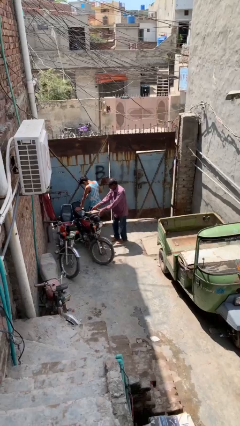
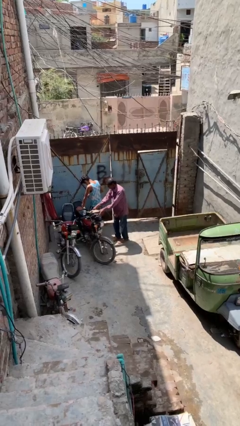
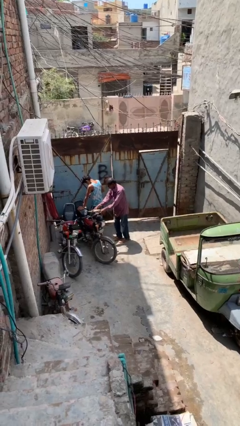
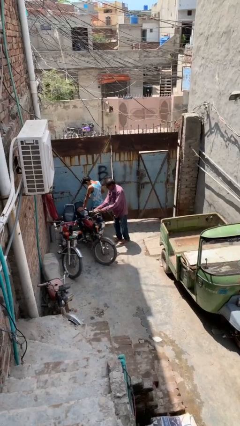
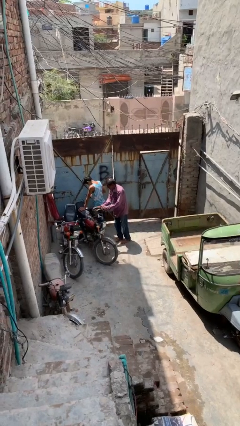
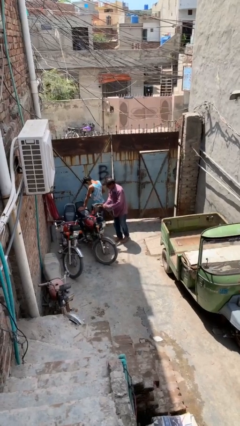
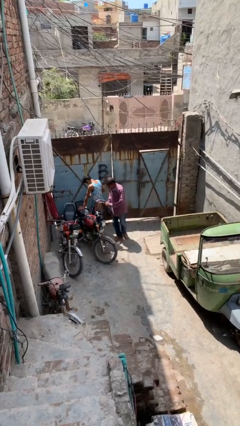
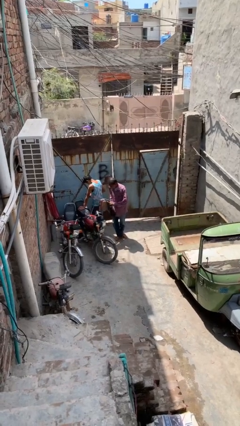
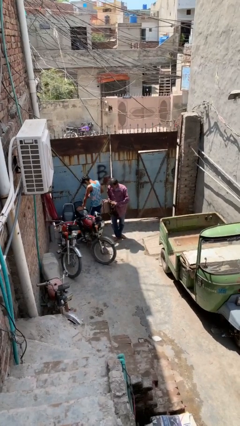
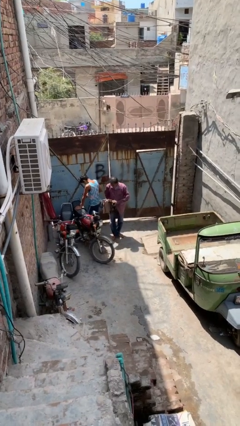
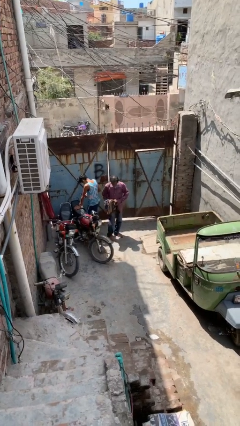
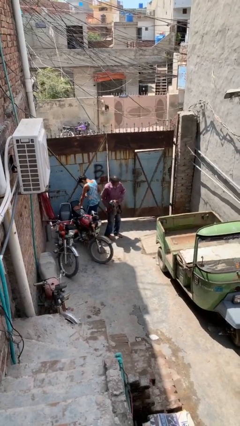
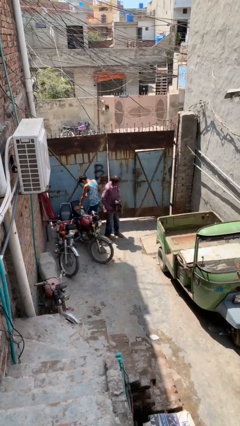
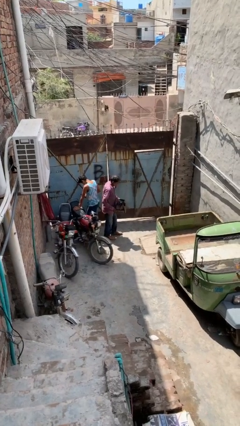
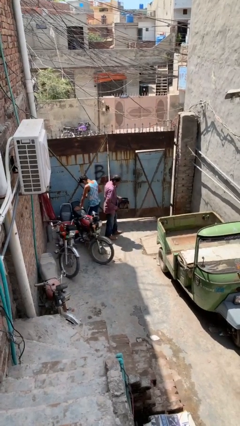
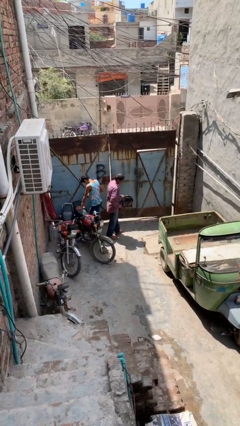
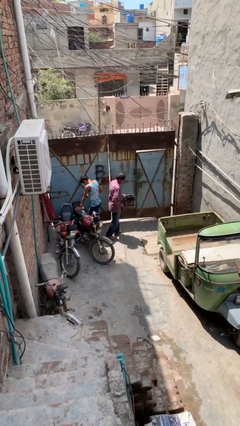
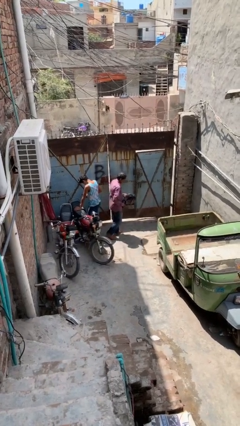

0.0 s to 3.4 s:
person steals object from person

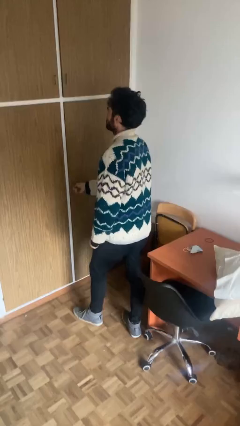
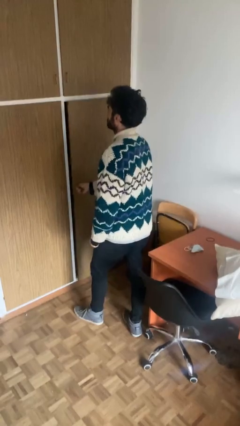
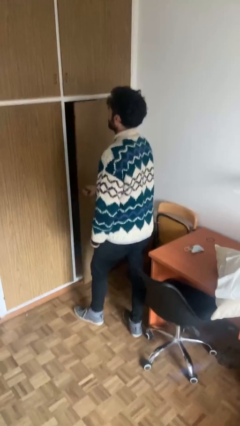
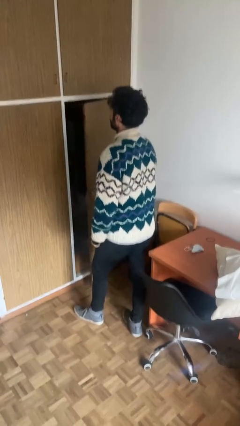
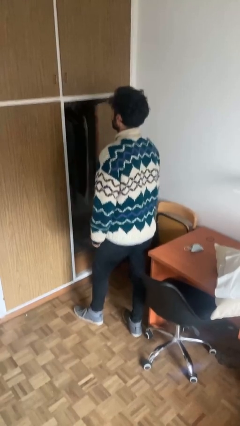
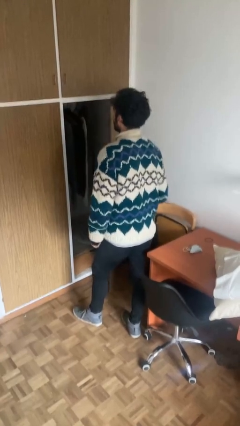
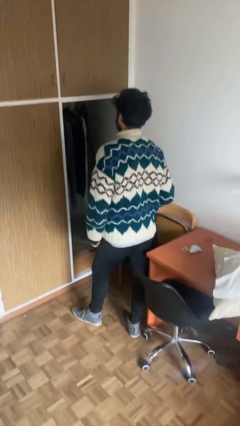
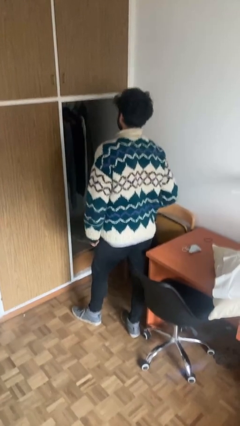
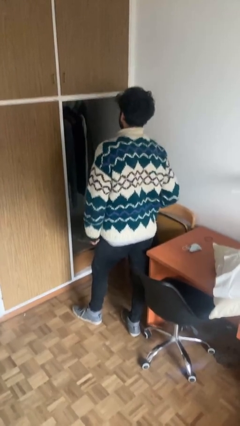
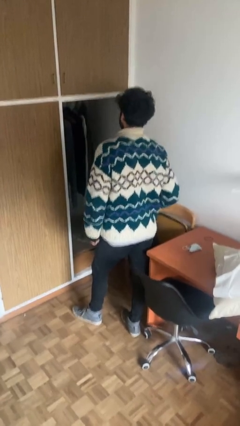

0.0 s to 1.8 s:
person opens closet door

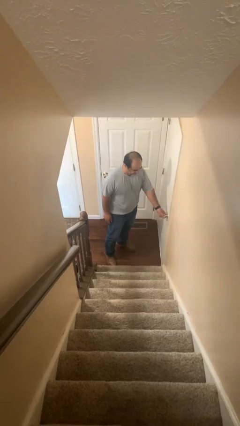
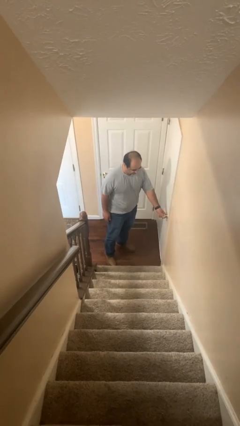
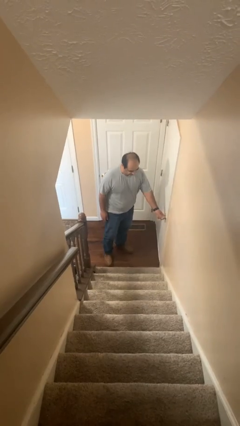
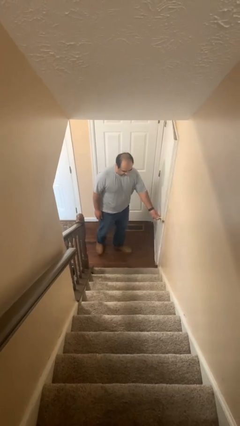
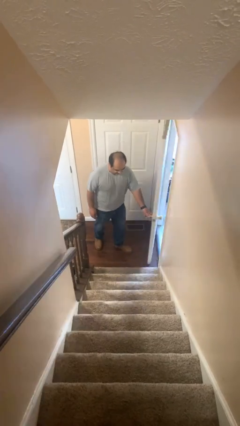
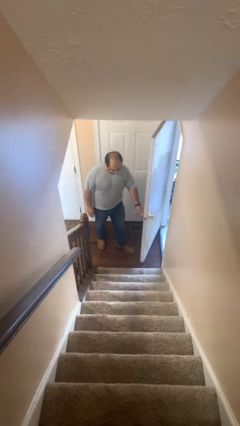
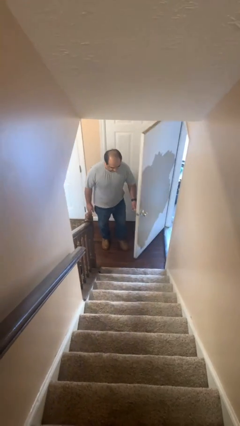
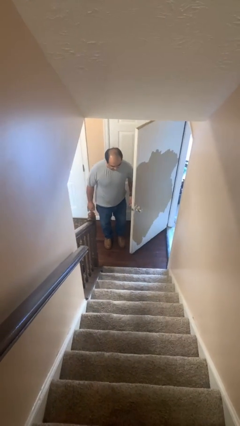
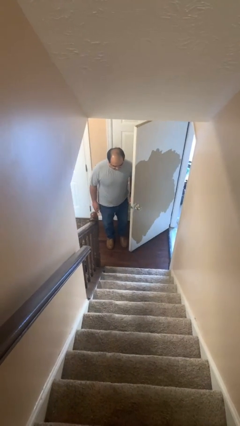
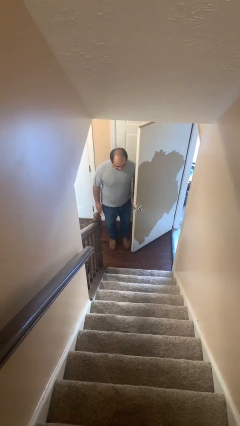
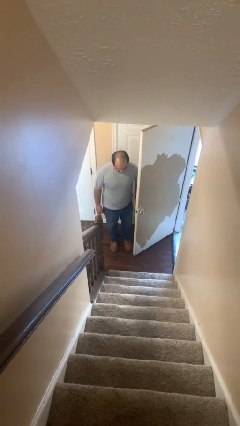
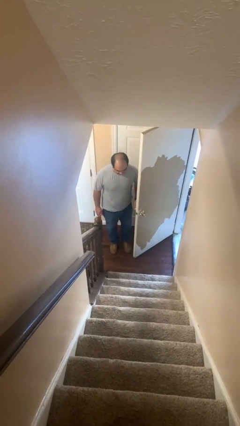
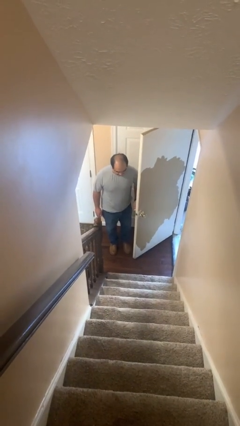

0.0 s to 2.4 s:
person opens facility door

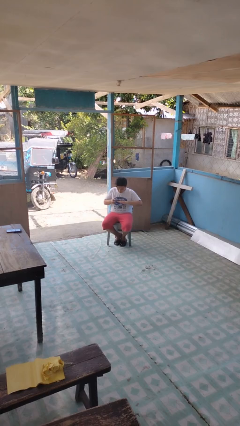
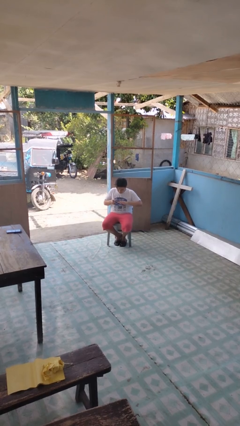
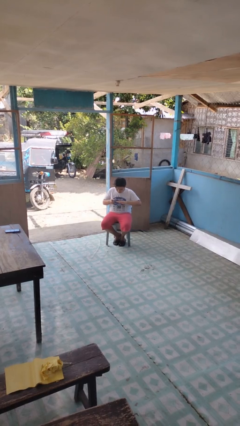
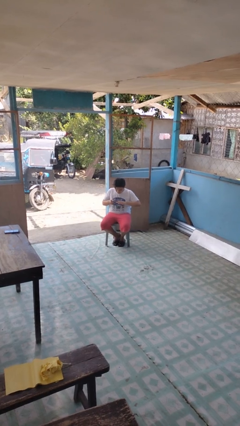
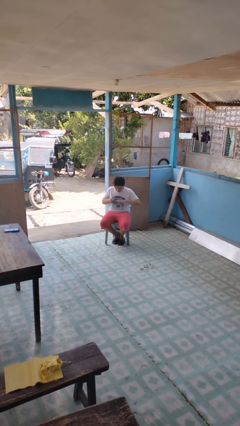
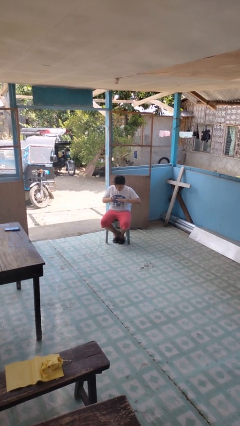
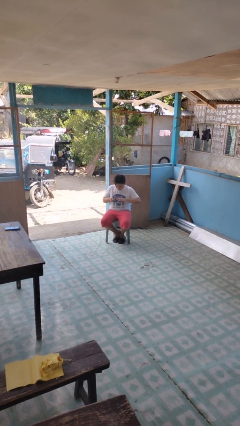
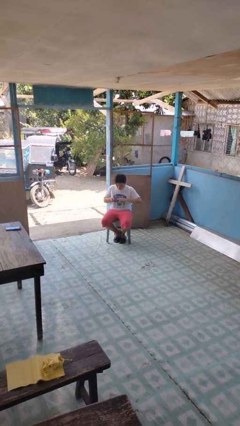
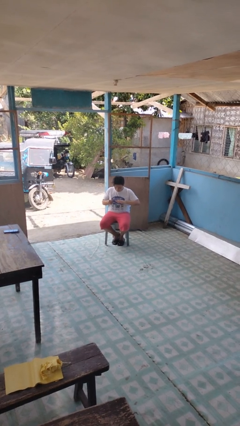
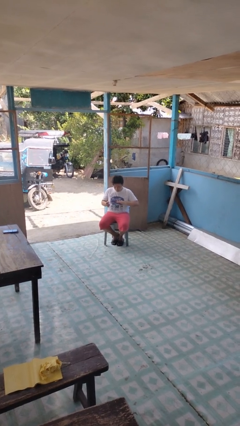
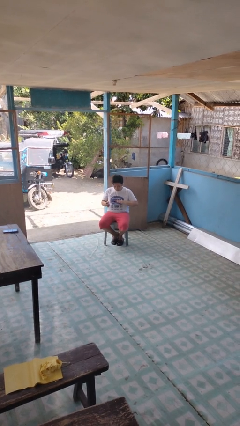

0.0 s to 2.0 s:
person clips fingernails

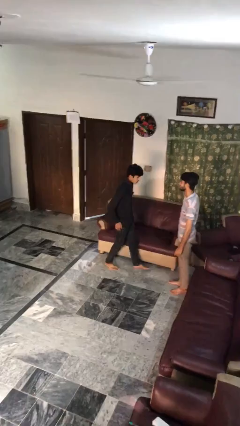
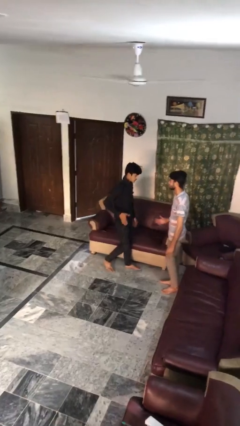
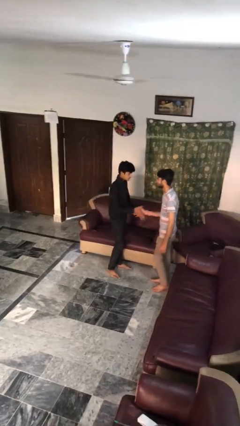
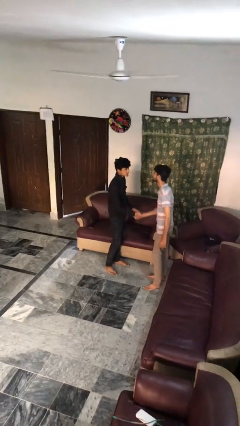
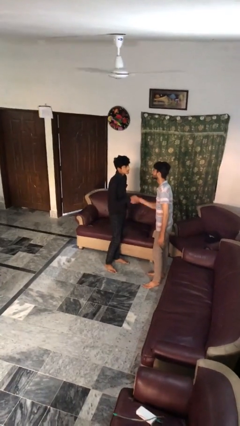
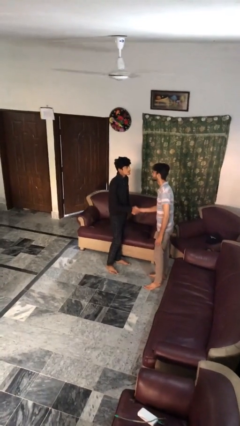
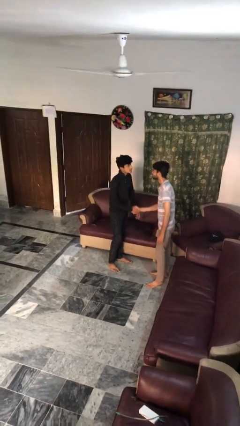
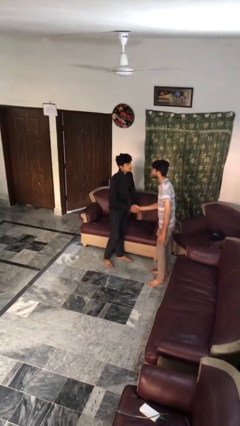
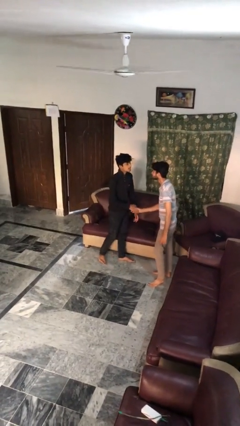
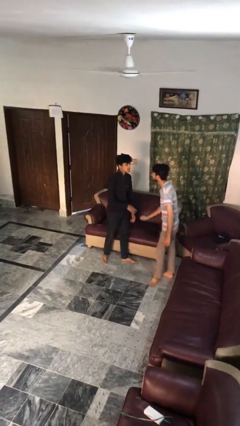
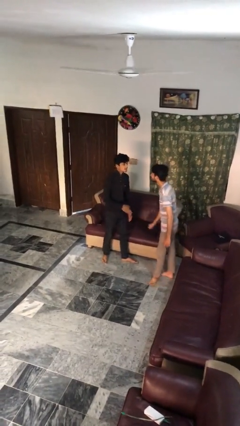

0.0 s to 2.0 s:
person shakes hand

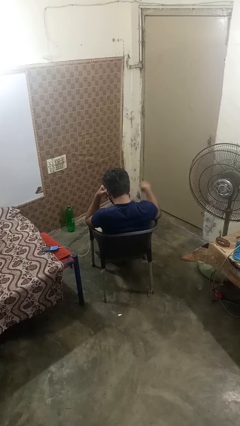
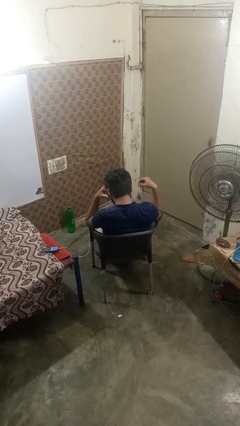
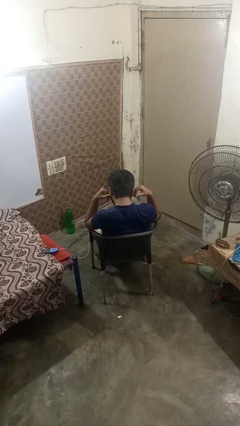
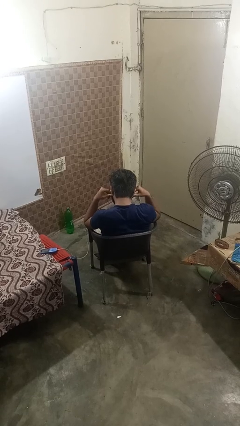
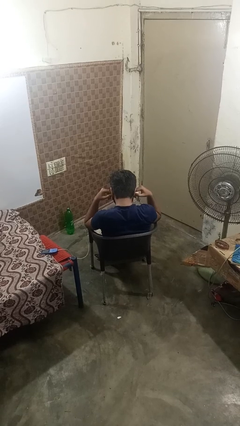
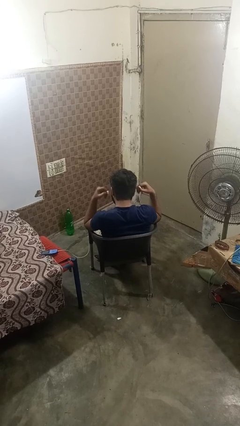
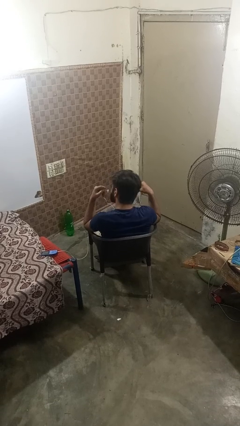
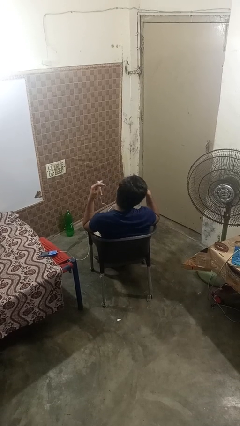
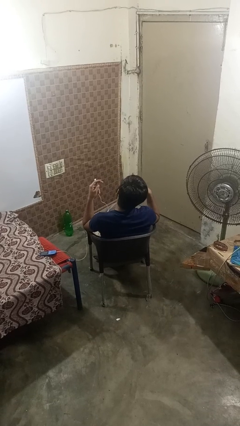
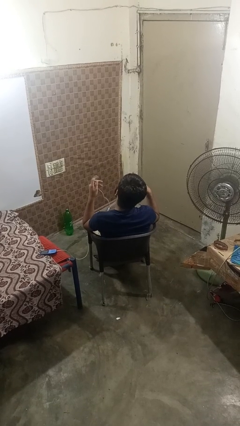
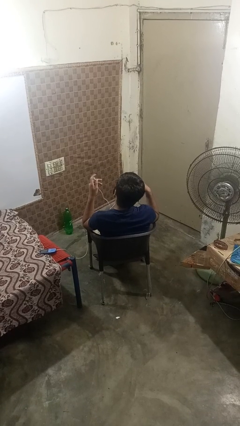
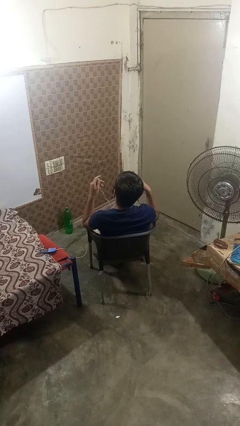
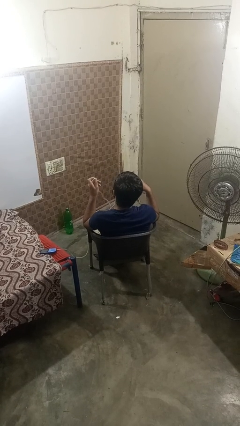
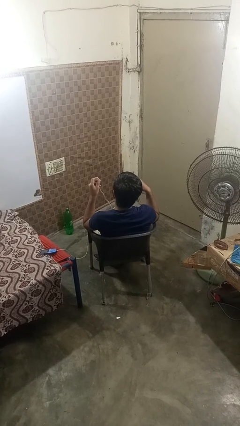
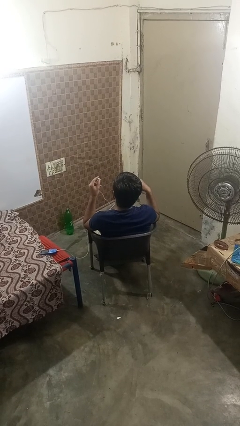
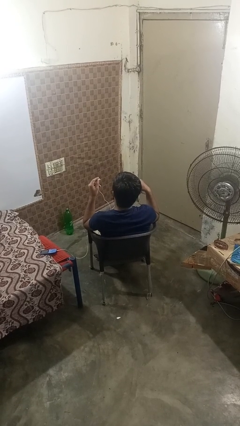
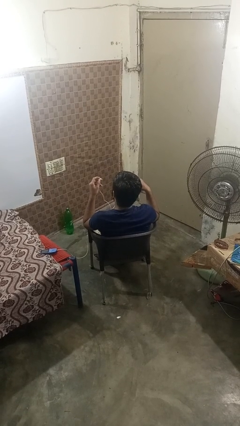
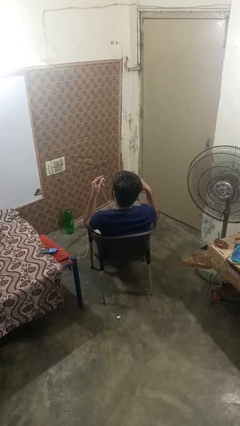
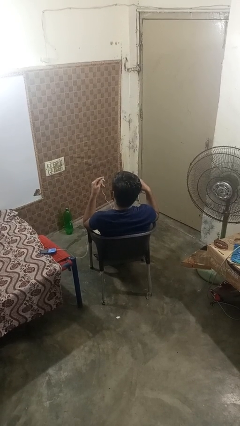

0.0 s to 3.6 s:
person takes off headphones

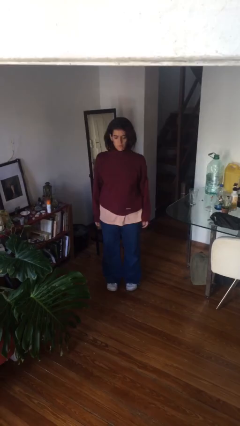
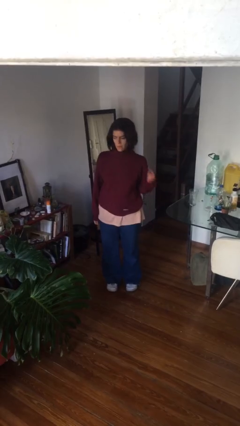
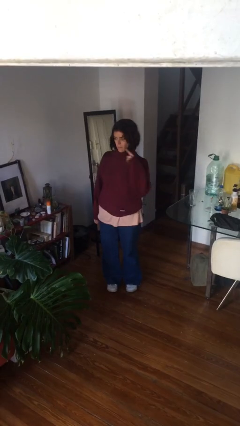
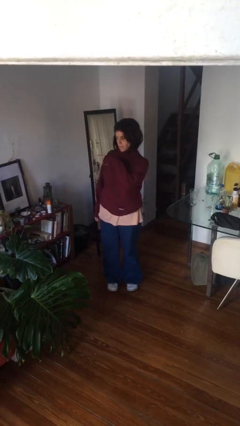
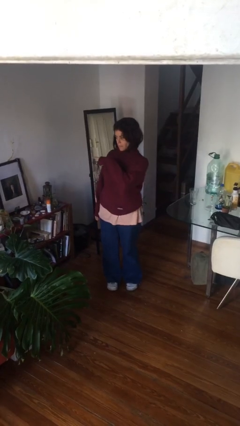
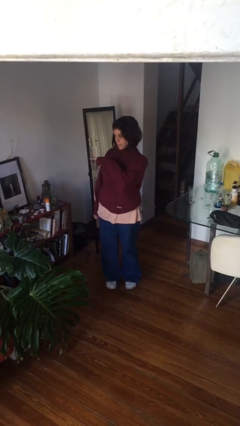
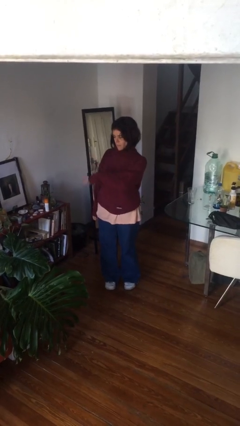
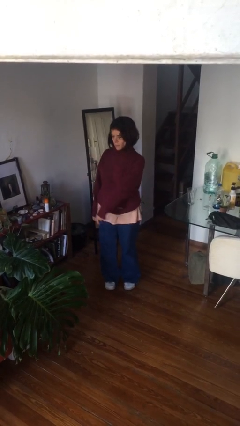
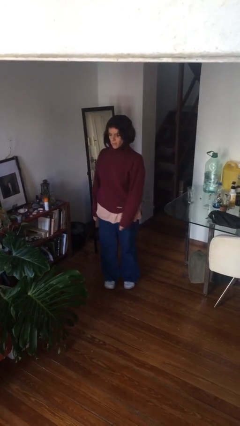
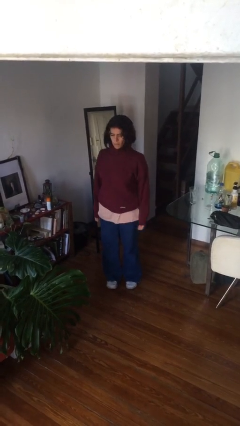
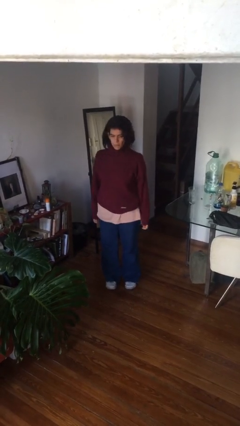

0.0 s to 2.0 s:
person gestures swipe right
